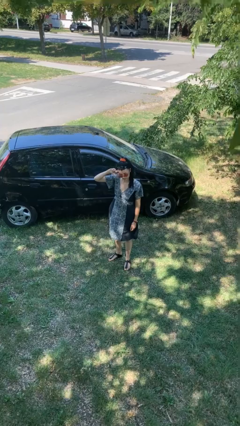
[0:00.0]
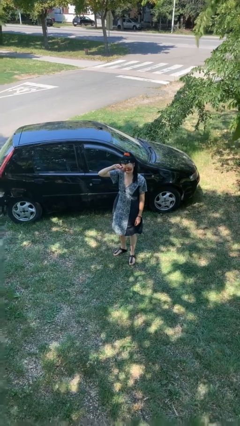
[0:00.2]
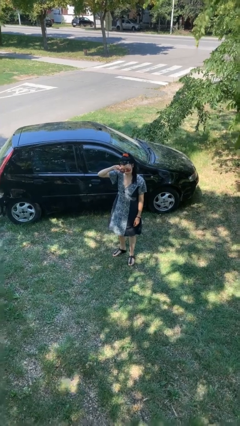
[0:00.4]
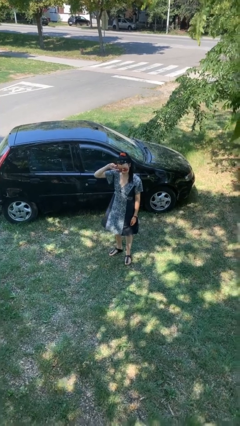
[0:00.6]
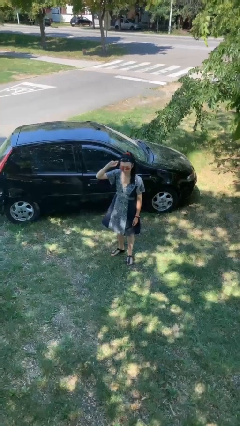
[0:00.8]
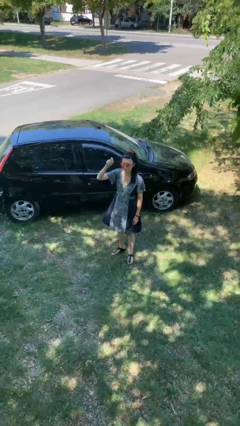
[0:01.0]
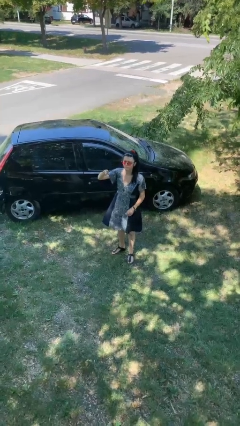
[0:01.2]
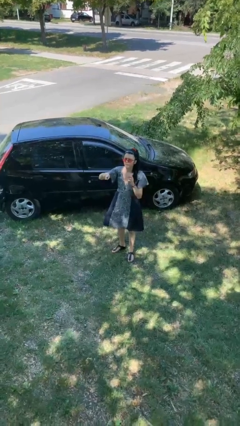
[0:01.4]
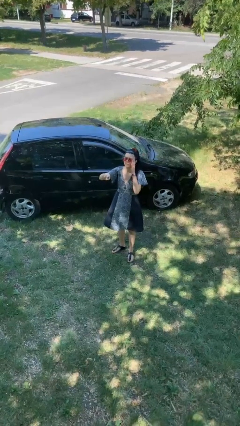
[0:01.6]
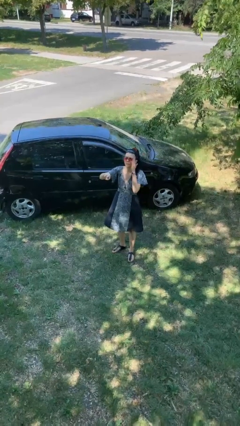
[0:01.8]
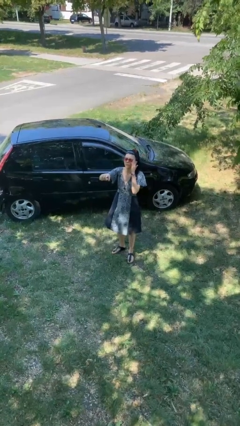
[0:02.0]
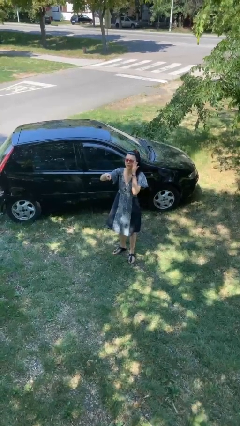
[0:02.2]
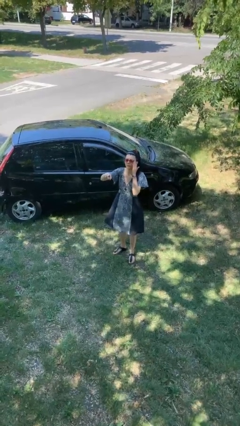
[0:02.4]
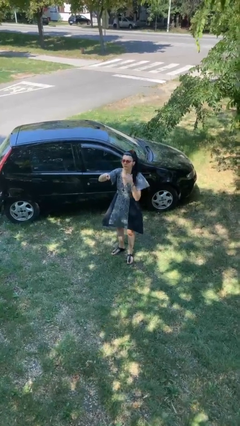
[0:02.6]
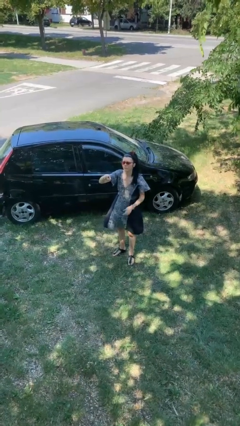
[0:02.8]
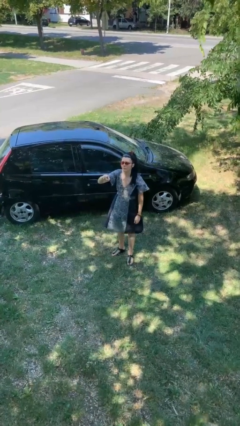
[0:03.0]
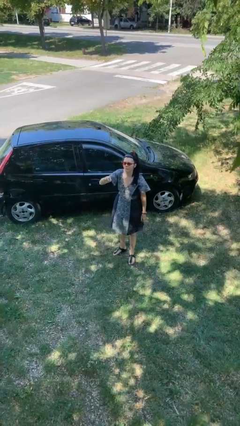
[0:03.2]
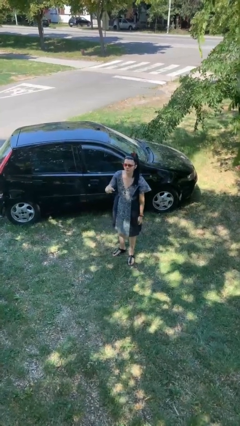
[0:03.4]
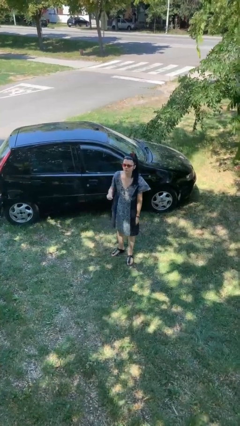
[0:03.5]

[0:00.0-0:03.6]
person points at person

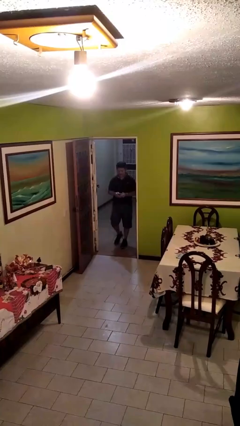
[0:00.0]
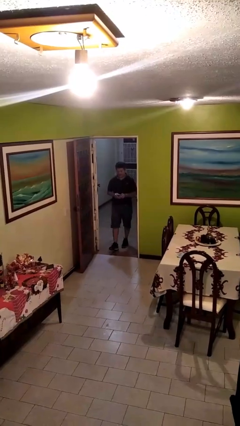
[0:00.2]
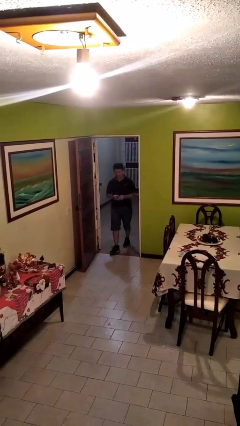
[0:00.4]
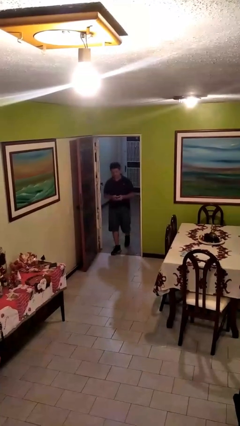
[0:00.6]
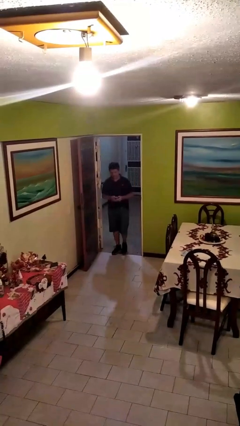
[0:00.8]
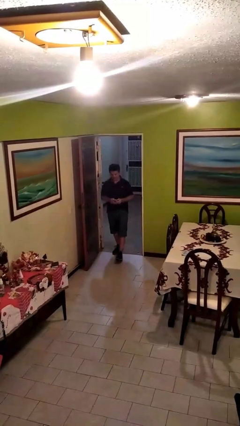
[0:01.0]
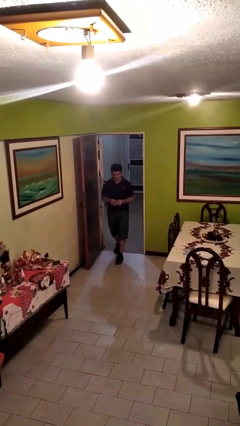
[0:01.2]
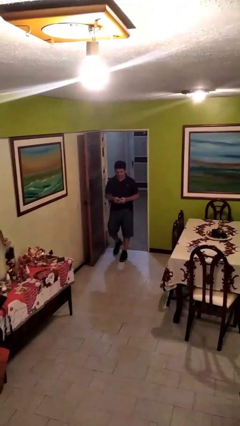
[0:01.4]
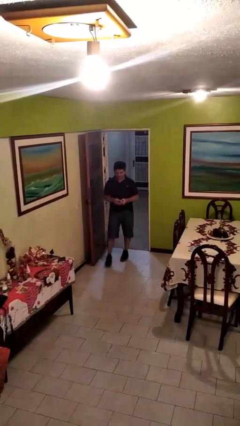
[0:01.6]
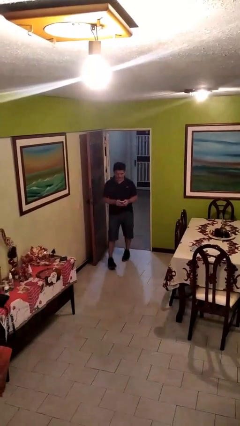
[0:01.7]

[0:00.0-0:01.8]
person enters scene through structure

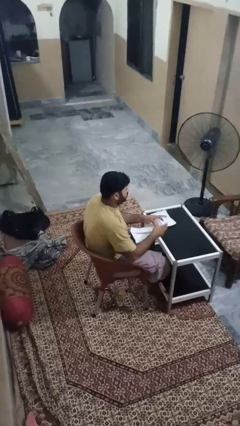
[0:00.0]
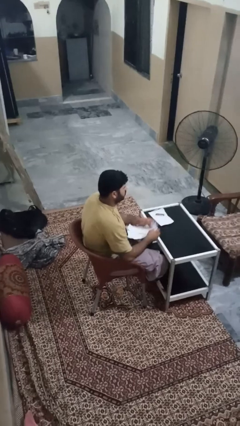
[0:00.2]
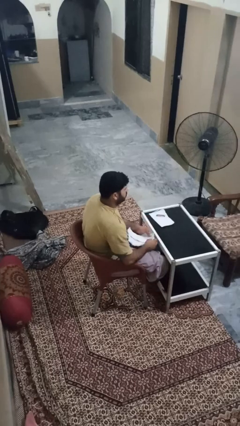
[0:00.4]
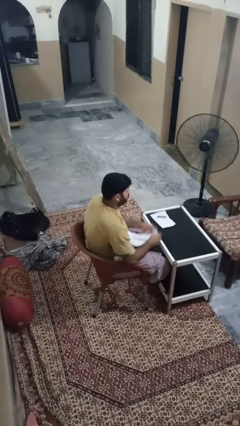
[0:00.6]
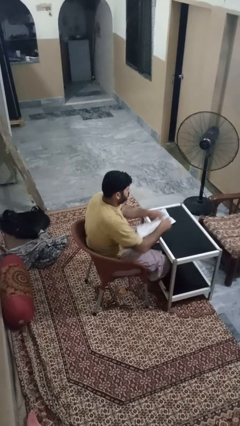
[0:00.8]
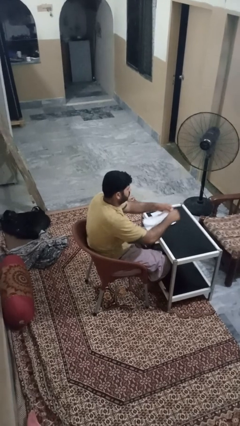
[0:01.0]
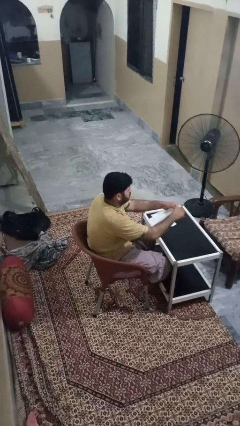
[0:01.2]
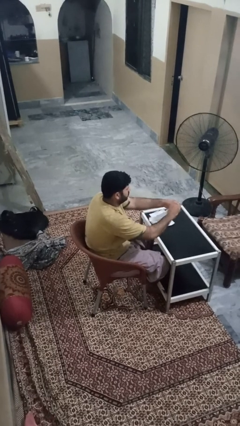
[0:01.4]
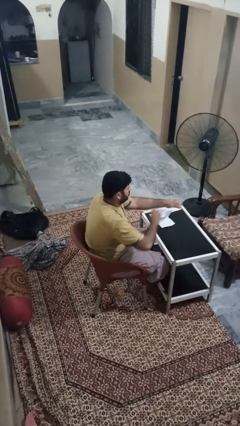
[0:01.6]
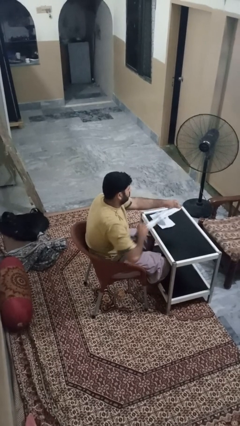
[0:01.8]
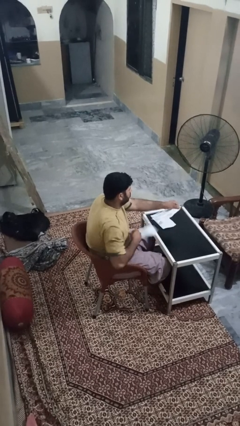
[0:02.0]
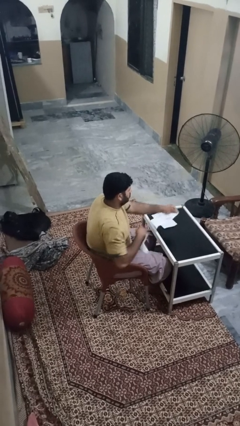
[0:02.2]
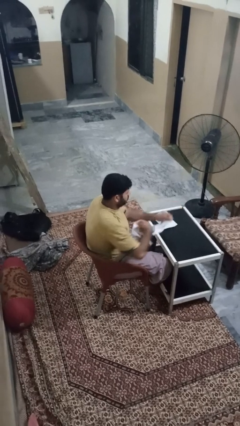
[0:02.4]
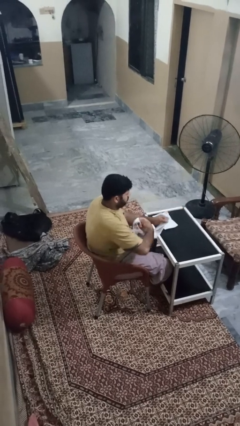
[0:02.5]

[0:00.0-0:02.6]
person tears paper

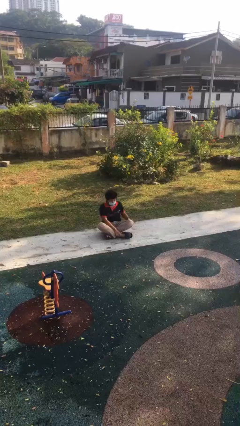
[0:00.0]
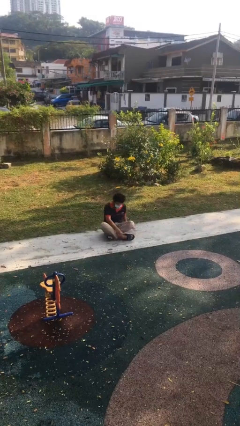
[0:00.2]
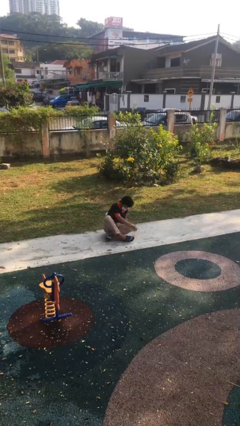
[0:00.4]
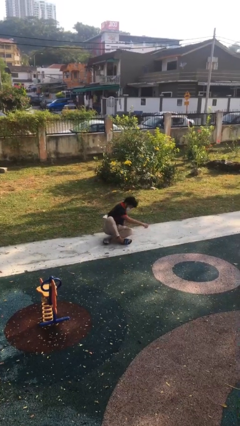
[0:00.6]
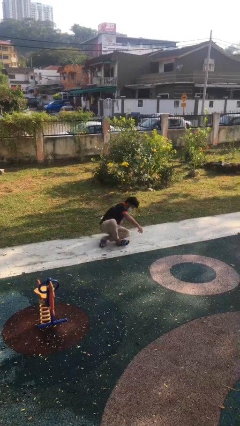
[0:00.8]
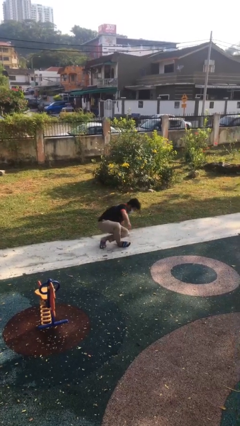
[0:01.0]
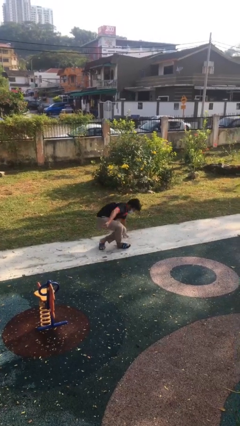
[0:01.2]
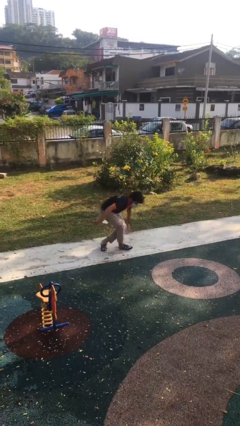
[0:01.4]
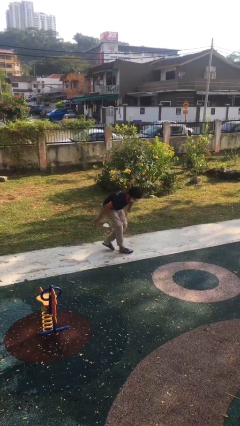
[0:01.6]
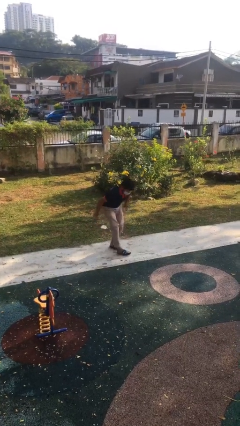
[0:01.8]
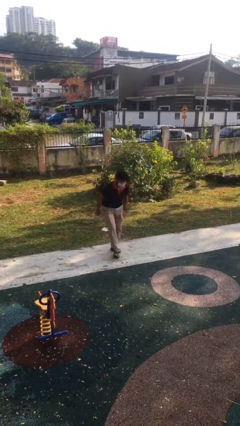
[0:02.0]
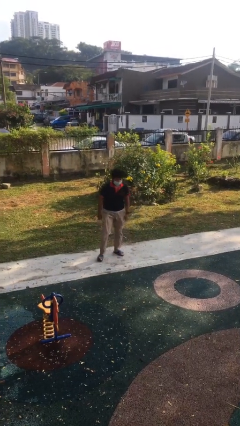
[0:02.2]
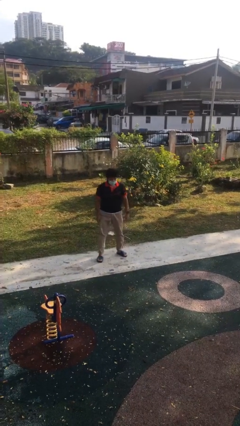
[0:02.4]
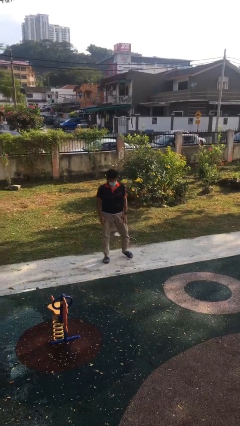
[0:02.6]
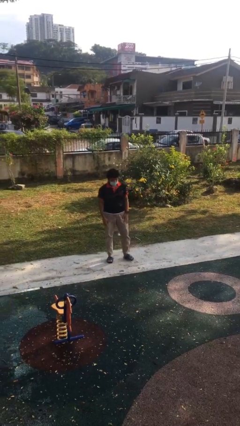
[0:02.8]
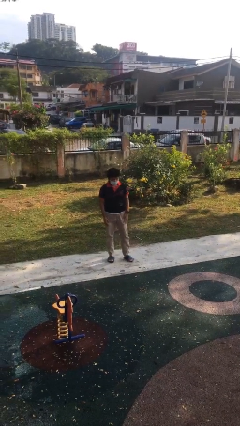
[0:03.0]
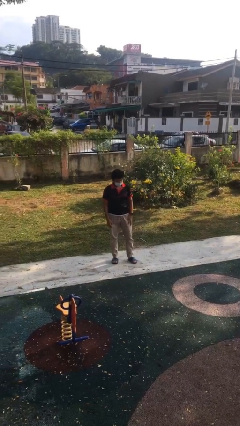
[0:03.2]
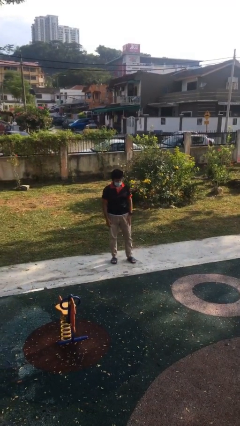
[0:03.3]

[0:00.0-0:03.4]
person stands up from floor

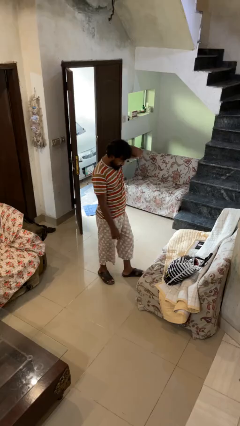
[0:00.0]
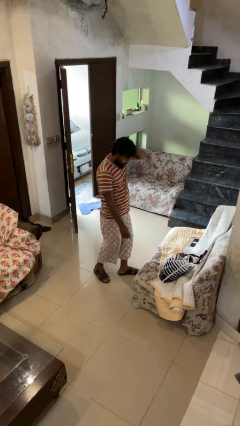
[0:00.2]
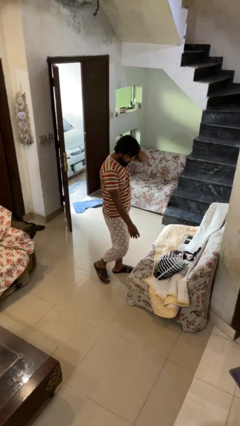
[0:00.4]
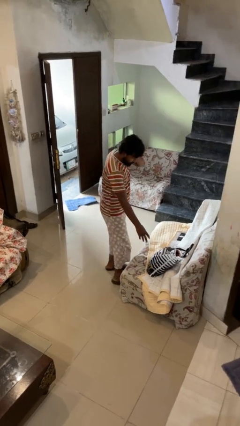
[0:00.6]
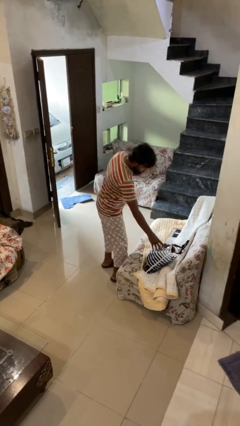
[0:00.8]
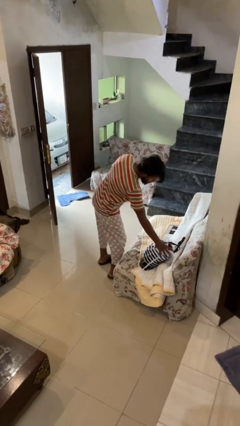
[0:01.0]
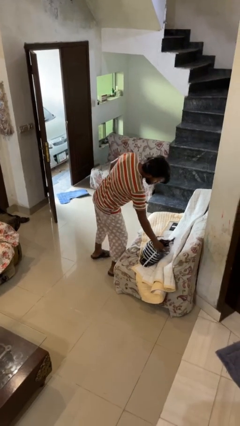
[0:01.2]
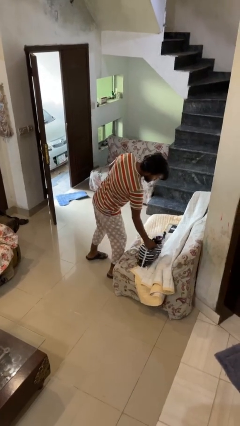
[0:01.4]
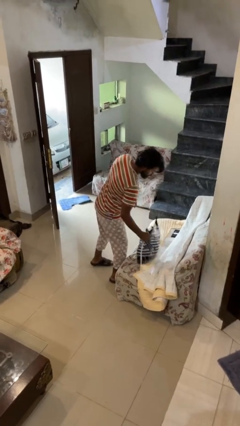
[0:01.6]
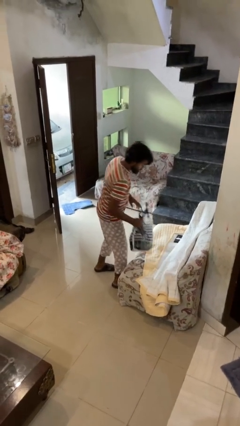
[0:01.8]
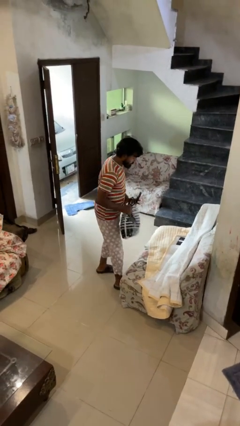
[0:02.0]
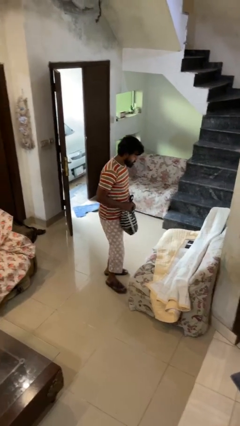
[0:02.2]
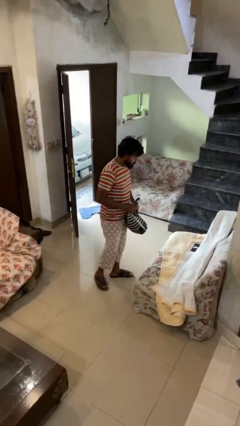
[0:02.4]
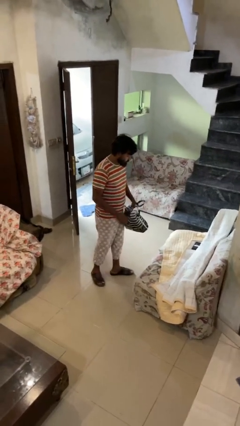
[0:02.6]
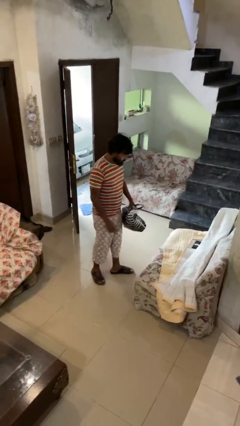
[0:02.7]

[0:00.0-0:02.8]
person picks up object from couch

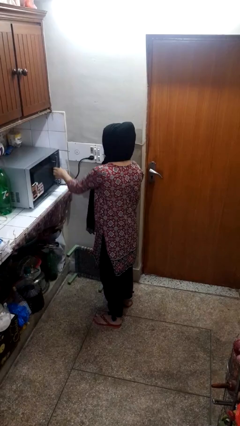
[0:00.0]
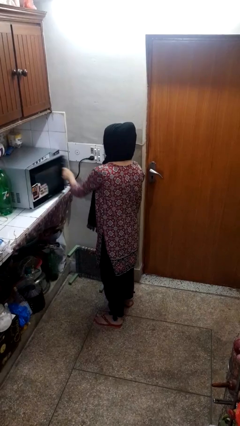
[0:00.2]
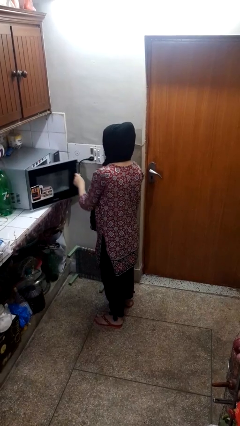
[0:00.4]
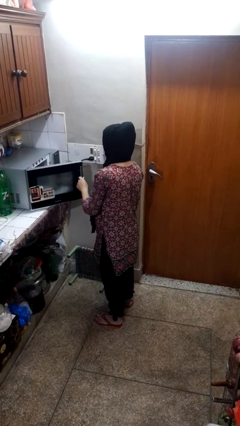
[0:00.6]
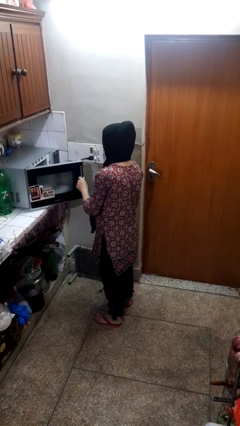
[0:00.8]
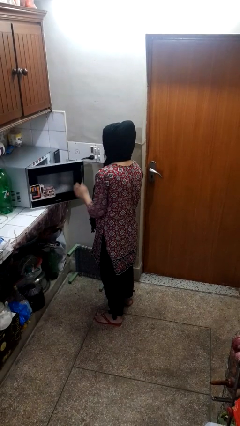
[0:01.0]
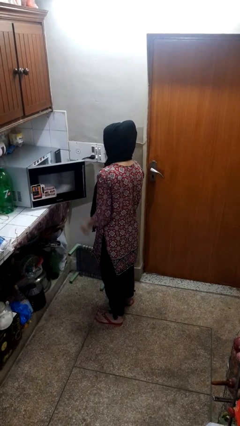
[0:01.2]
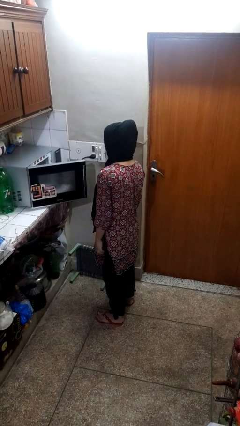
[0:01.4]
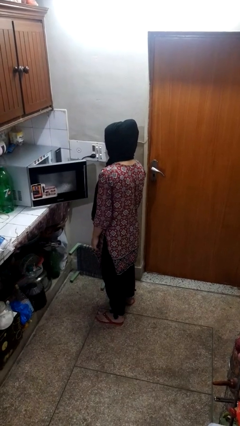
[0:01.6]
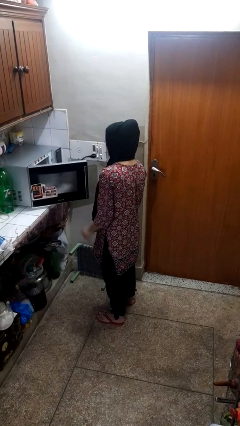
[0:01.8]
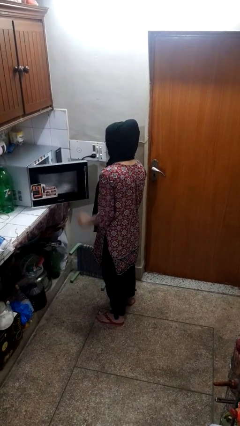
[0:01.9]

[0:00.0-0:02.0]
person opens oven door

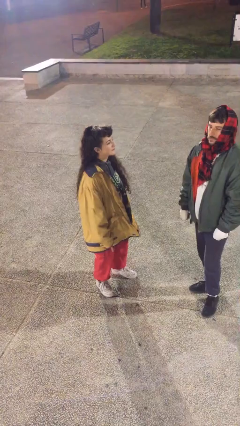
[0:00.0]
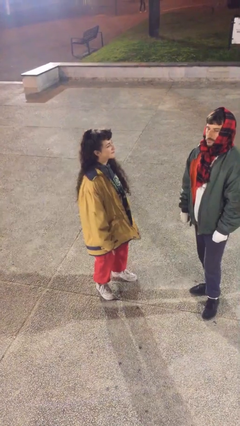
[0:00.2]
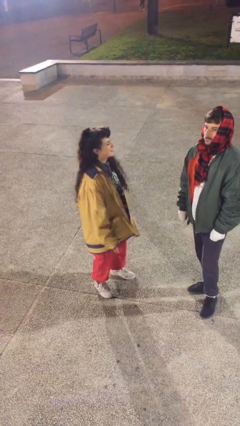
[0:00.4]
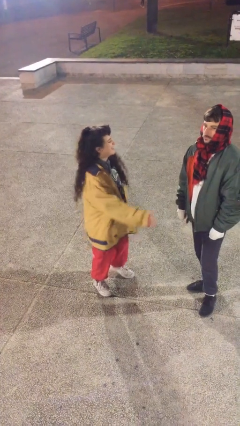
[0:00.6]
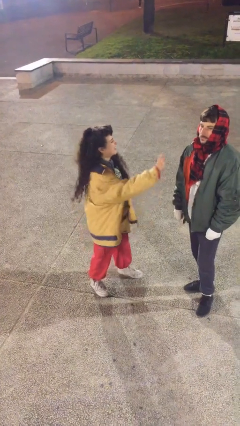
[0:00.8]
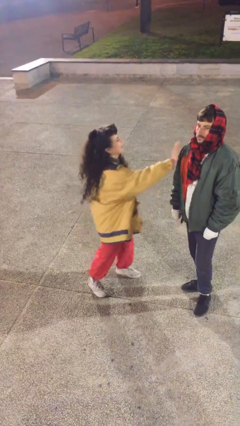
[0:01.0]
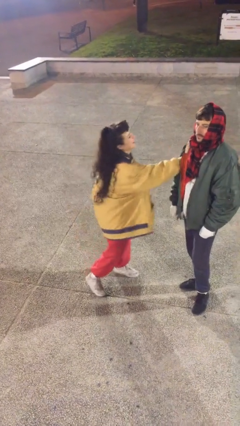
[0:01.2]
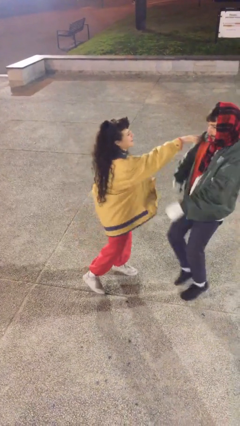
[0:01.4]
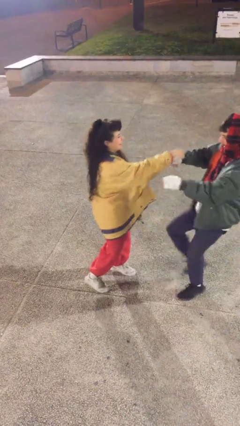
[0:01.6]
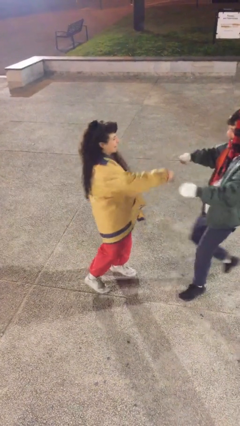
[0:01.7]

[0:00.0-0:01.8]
person shoves person
